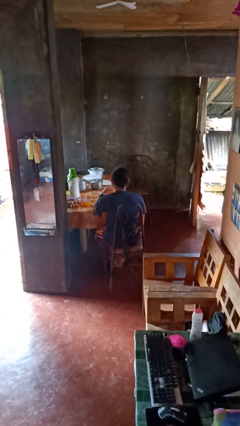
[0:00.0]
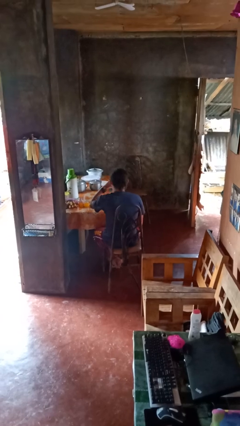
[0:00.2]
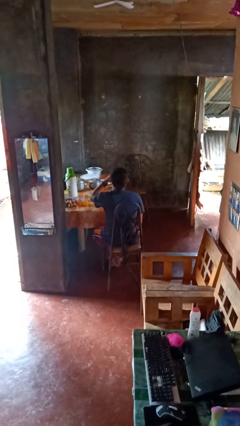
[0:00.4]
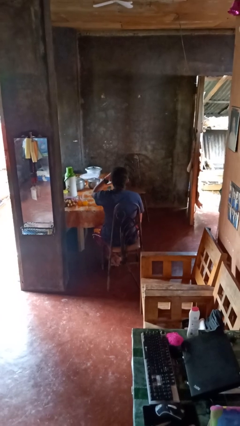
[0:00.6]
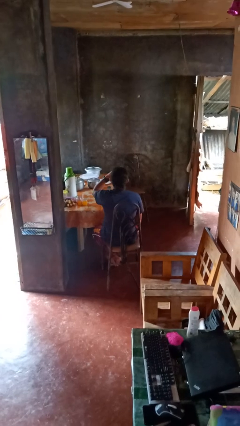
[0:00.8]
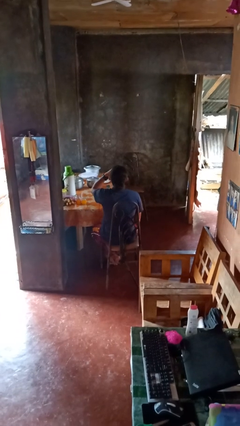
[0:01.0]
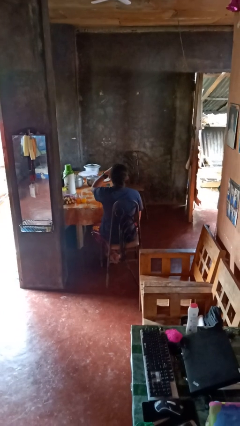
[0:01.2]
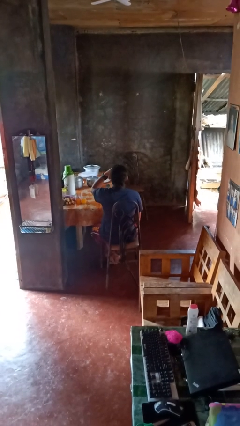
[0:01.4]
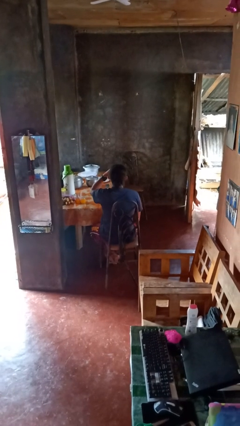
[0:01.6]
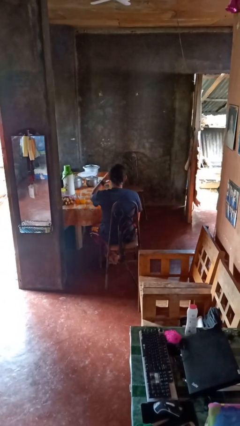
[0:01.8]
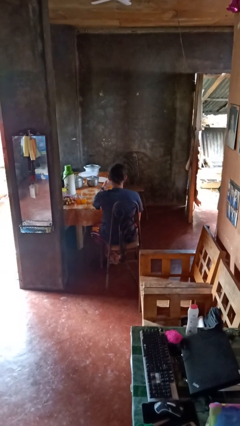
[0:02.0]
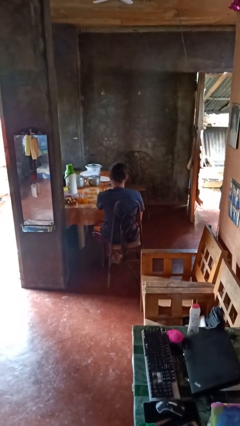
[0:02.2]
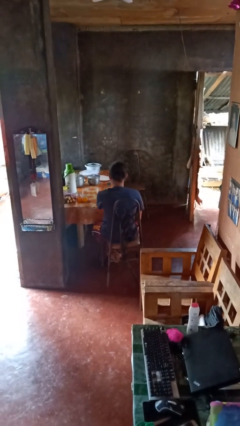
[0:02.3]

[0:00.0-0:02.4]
person drinks from shotglass

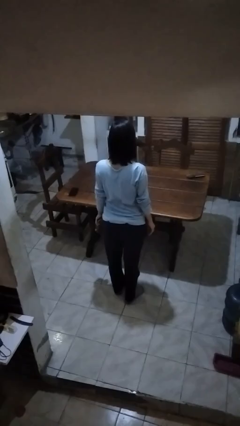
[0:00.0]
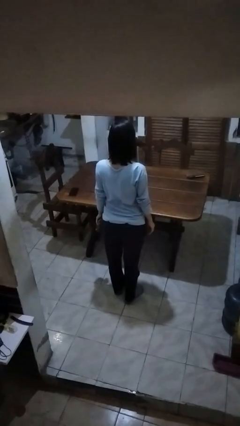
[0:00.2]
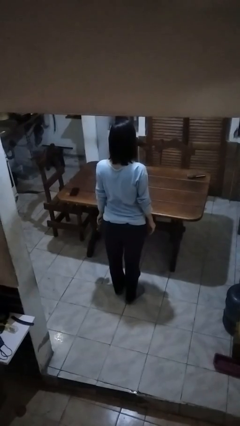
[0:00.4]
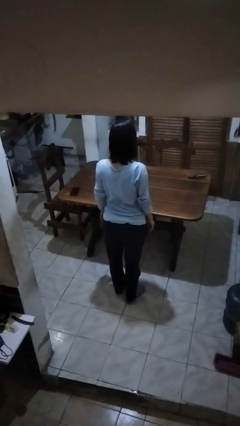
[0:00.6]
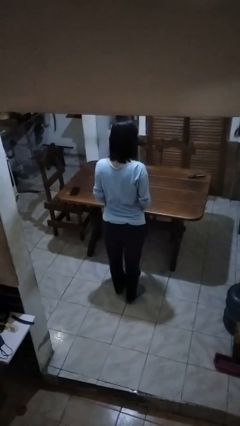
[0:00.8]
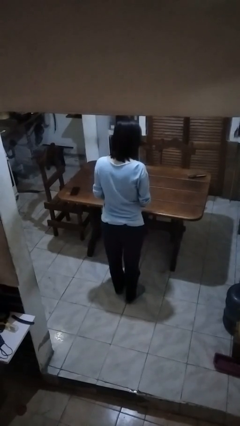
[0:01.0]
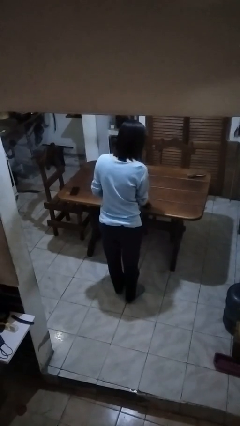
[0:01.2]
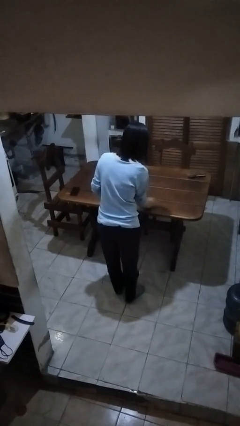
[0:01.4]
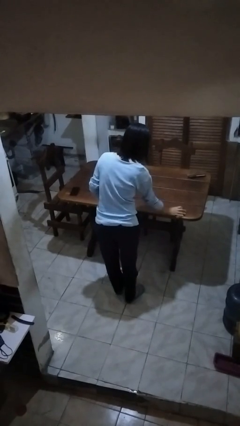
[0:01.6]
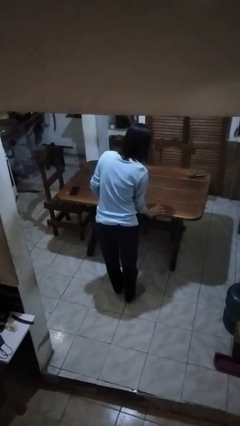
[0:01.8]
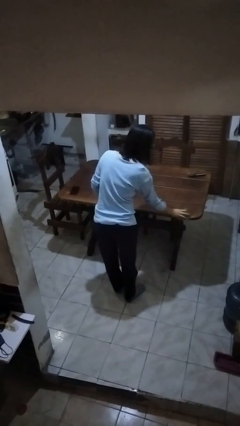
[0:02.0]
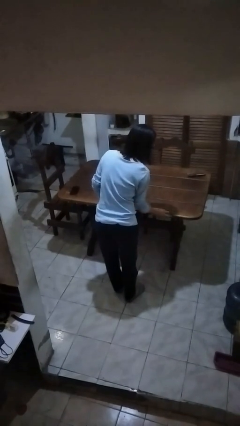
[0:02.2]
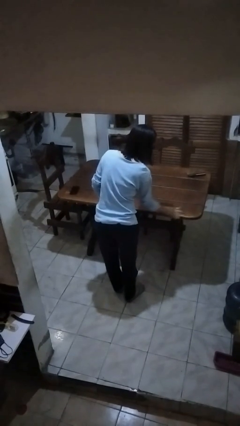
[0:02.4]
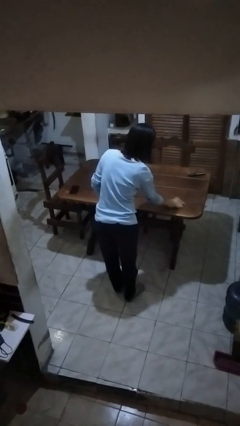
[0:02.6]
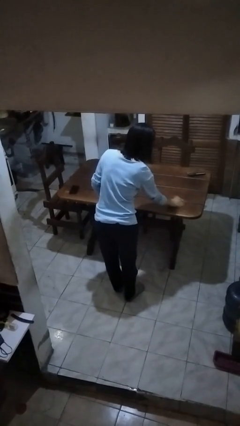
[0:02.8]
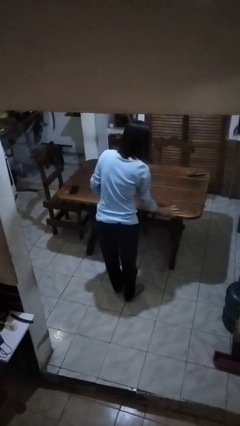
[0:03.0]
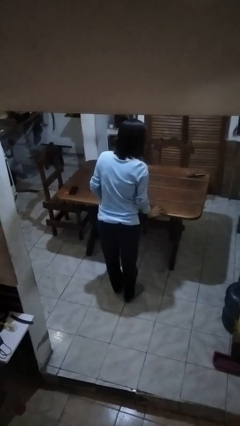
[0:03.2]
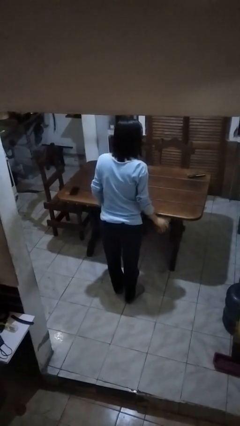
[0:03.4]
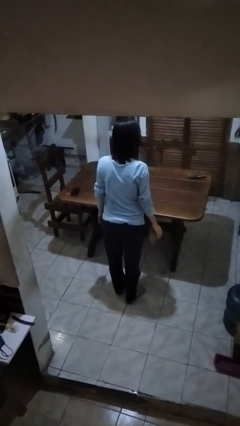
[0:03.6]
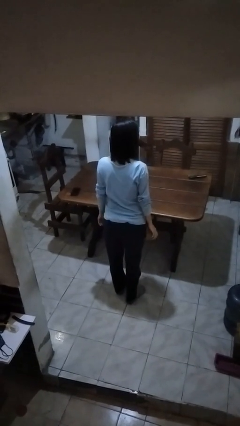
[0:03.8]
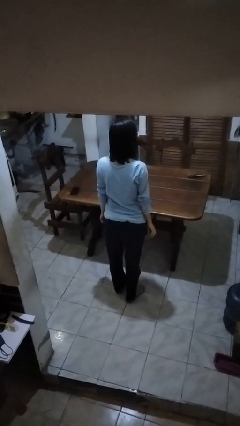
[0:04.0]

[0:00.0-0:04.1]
person cleans table with rag

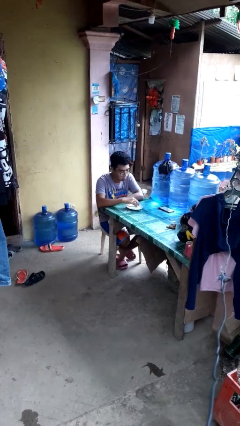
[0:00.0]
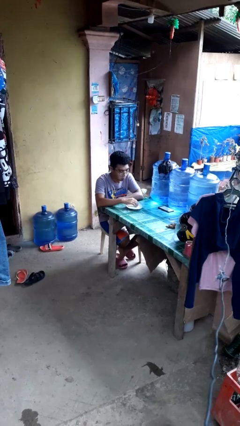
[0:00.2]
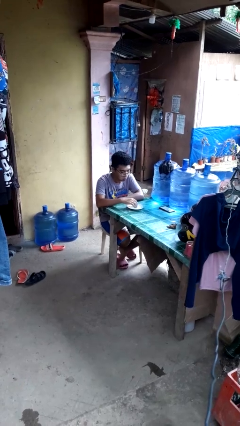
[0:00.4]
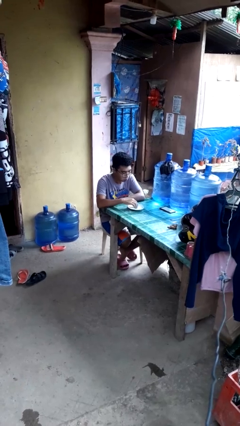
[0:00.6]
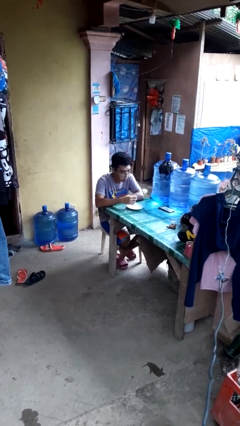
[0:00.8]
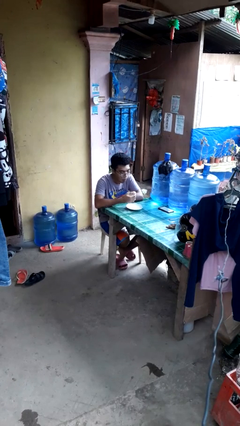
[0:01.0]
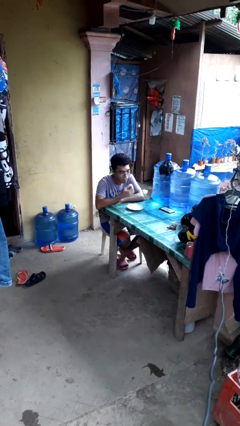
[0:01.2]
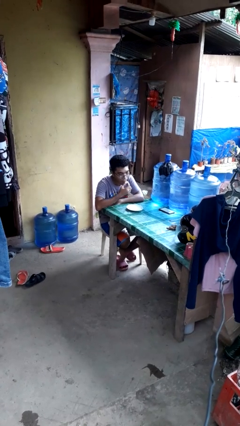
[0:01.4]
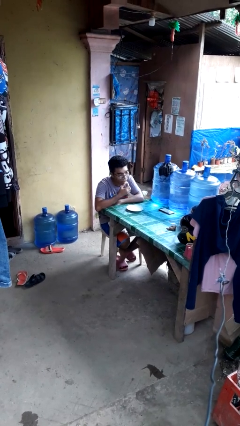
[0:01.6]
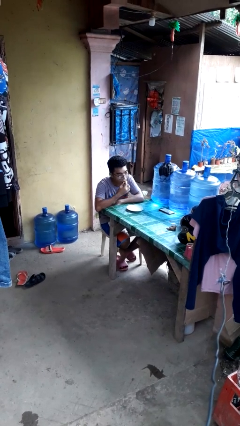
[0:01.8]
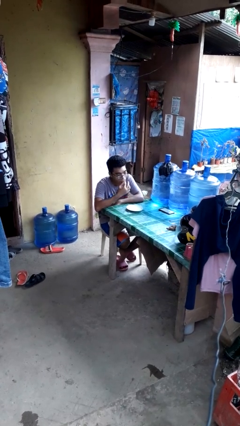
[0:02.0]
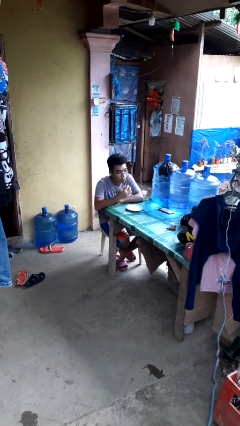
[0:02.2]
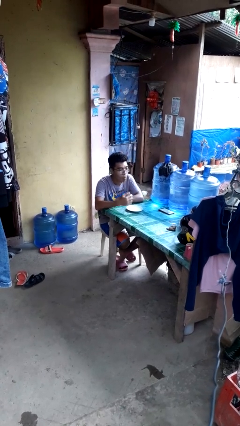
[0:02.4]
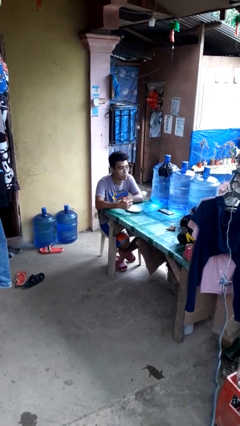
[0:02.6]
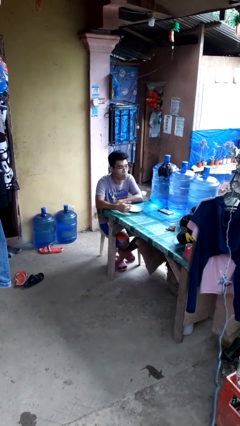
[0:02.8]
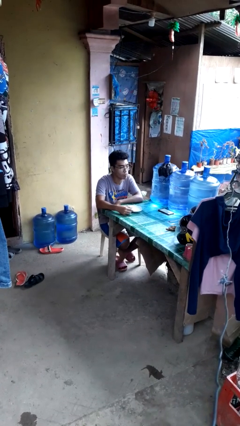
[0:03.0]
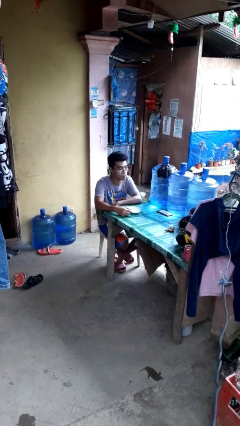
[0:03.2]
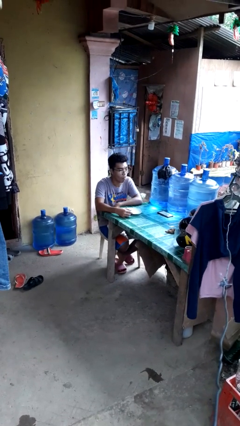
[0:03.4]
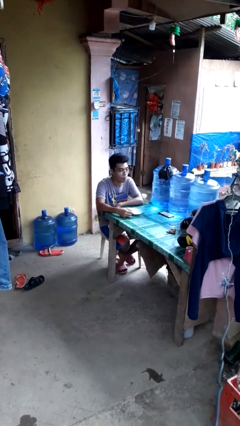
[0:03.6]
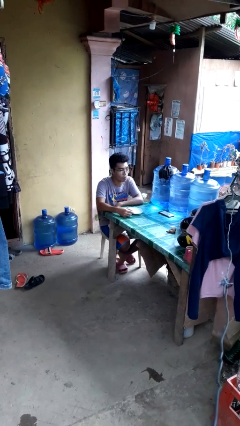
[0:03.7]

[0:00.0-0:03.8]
person eats with hands

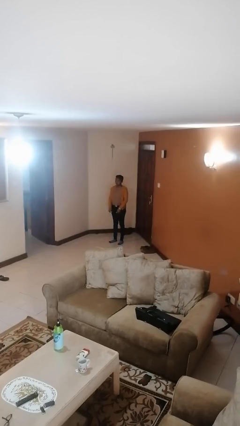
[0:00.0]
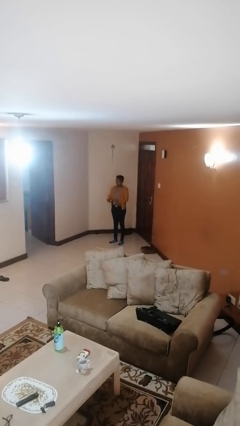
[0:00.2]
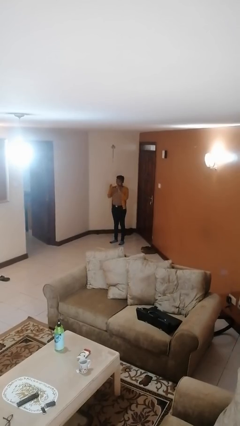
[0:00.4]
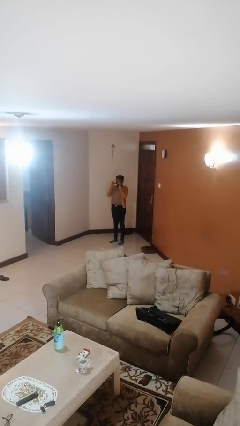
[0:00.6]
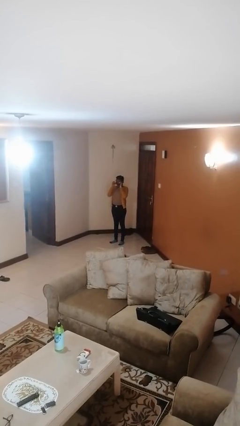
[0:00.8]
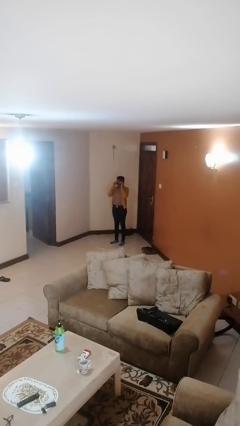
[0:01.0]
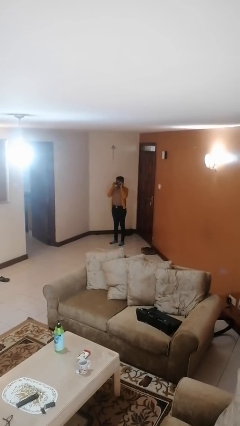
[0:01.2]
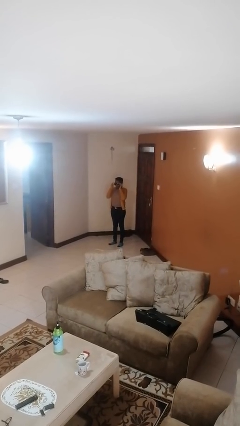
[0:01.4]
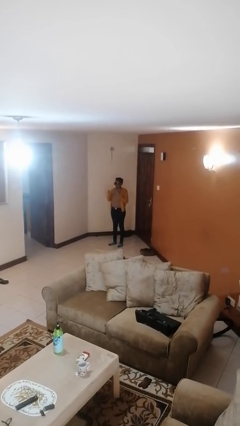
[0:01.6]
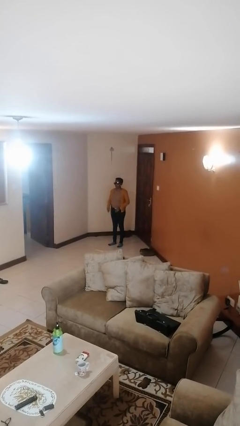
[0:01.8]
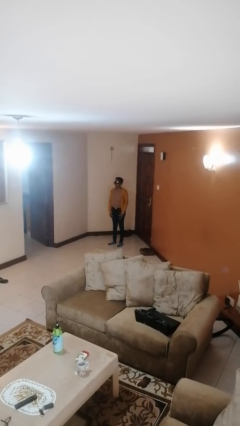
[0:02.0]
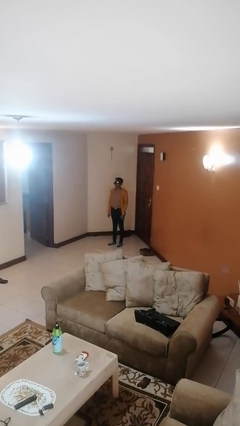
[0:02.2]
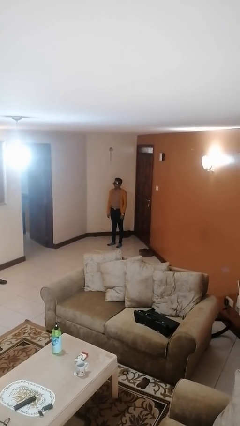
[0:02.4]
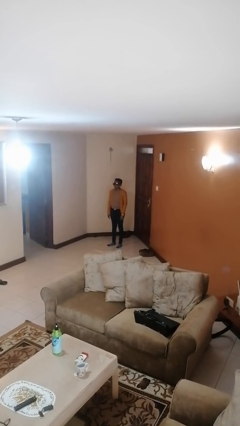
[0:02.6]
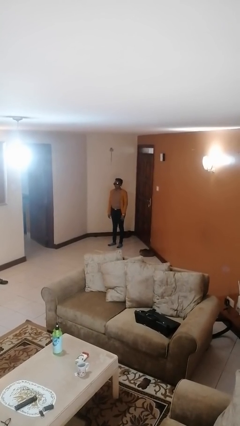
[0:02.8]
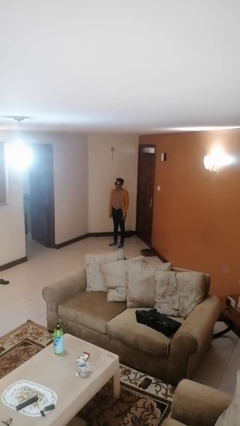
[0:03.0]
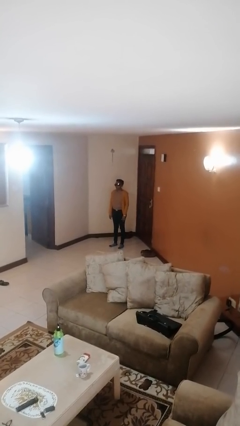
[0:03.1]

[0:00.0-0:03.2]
person puts on sunglasses

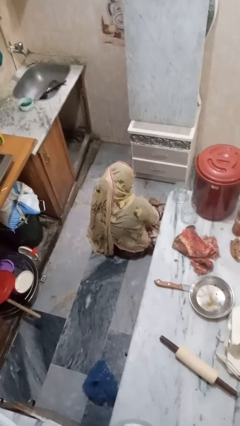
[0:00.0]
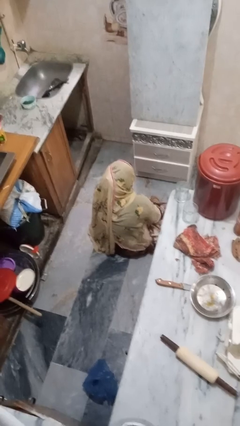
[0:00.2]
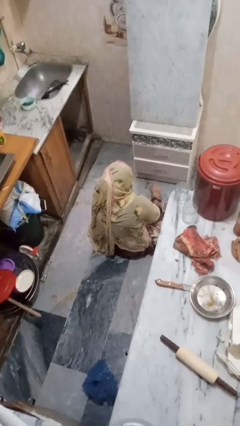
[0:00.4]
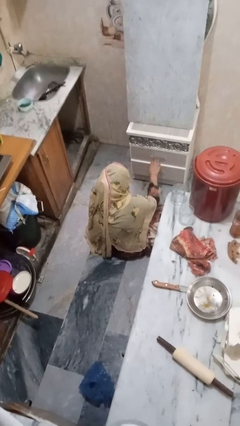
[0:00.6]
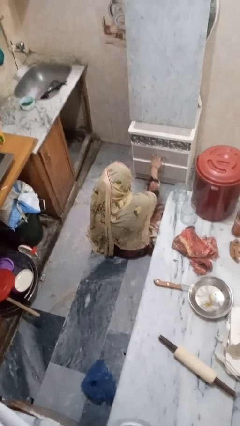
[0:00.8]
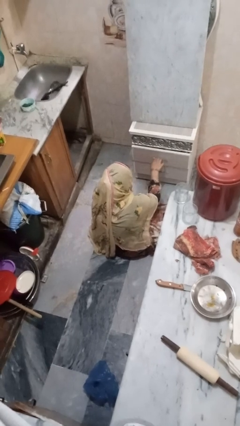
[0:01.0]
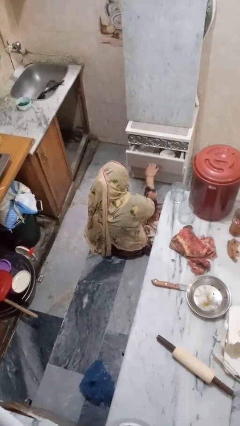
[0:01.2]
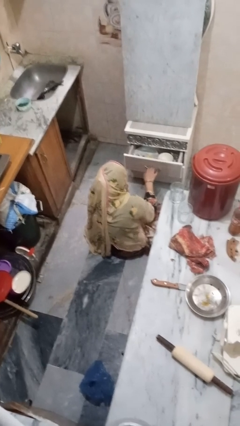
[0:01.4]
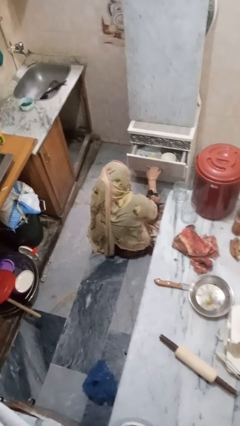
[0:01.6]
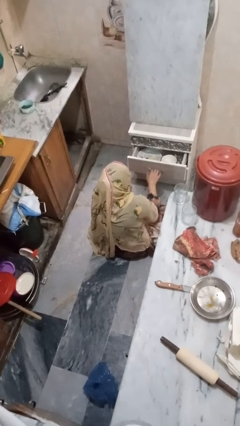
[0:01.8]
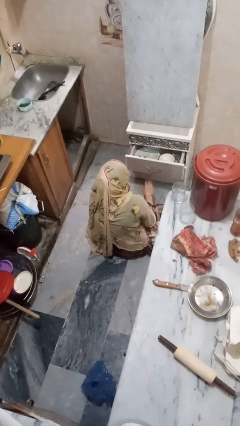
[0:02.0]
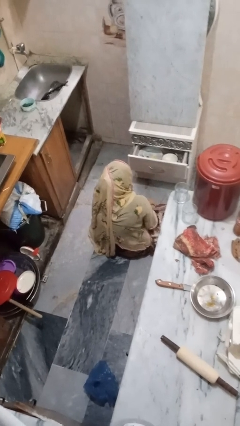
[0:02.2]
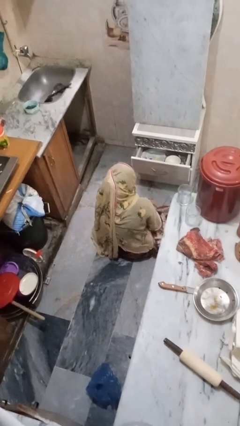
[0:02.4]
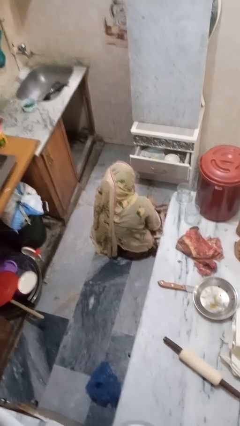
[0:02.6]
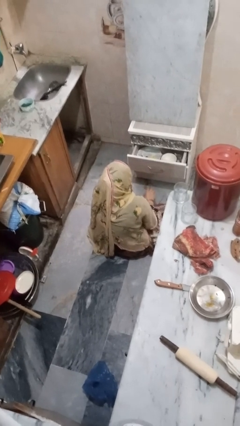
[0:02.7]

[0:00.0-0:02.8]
person opens kitchen drawer

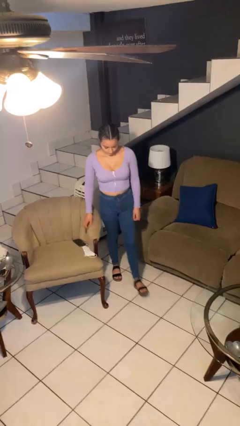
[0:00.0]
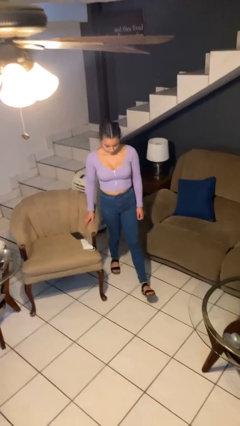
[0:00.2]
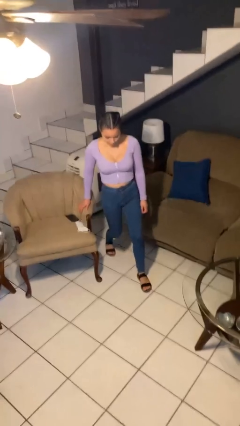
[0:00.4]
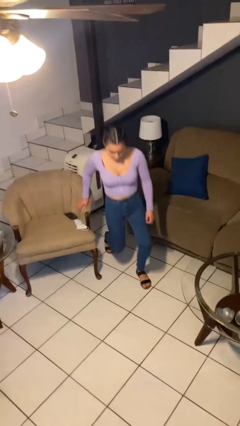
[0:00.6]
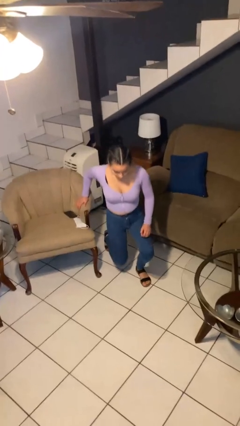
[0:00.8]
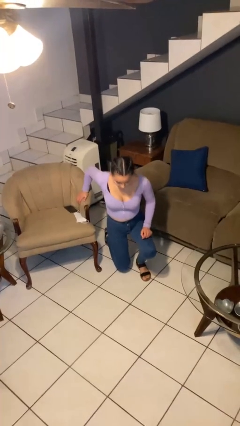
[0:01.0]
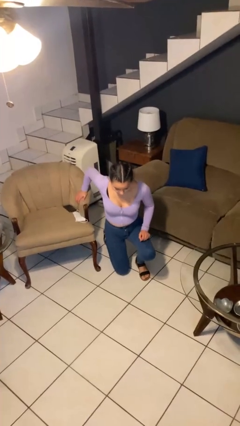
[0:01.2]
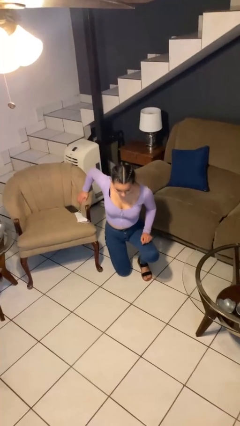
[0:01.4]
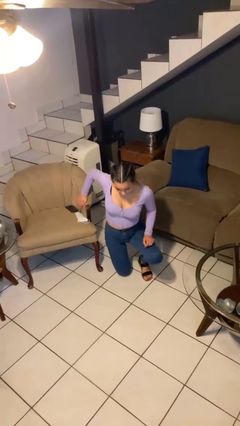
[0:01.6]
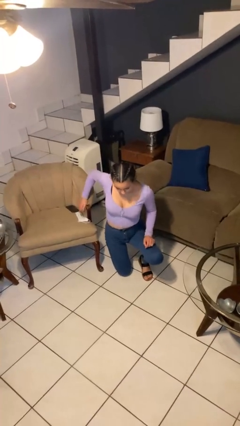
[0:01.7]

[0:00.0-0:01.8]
person kneels
